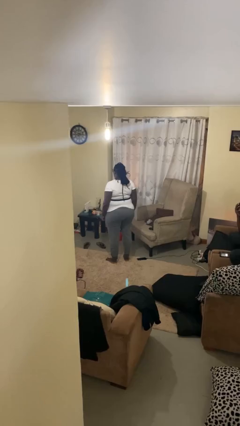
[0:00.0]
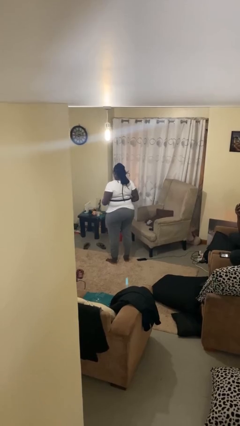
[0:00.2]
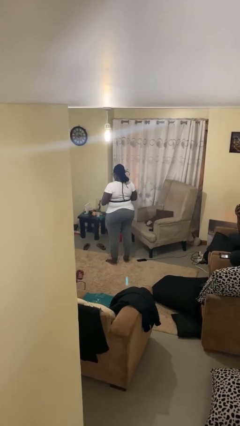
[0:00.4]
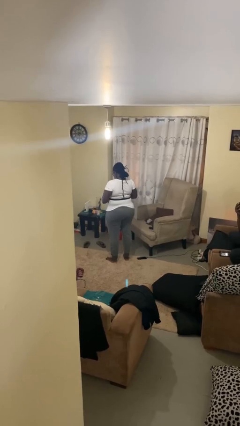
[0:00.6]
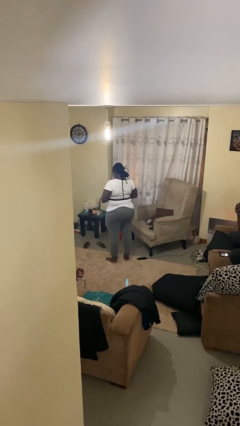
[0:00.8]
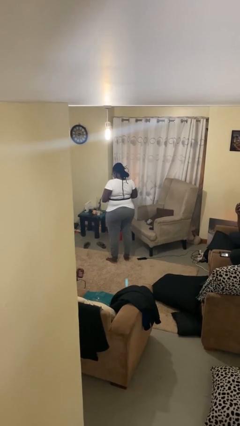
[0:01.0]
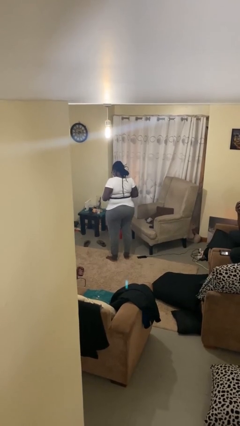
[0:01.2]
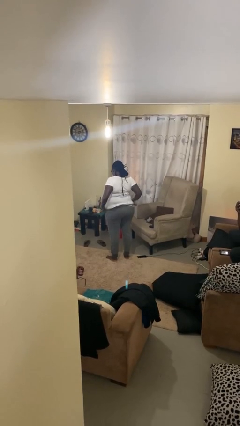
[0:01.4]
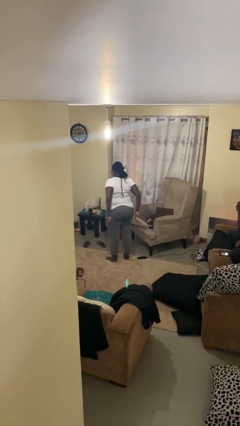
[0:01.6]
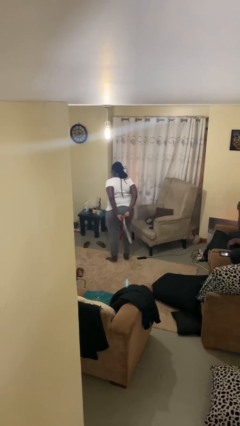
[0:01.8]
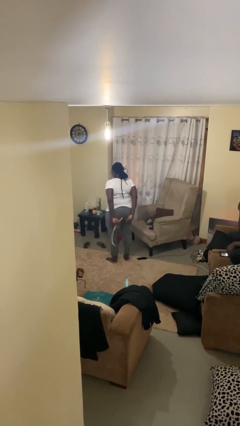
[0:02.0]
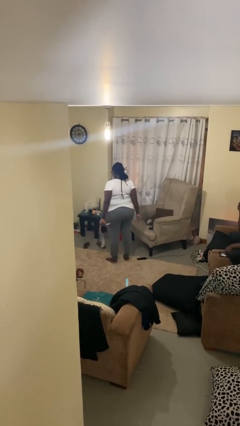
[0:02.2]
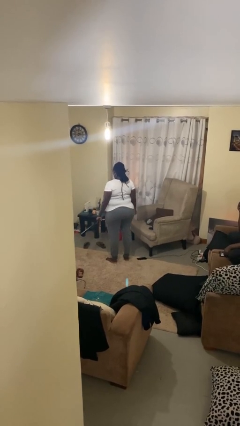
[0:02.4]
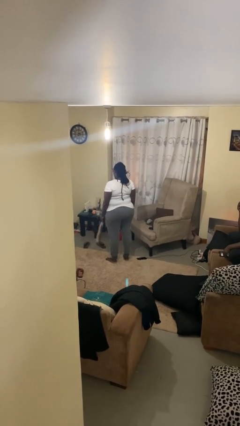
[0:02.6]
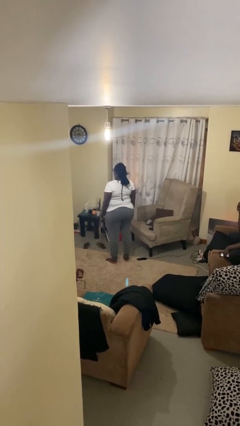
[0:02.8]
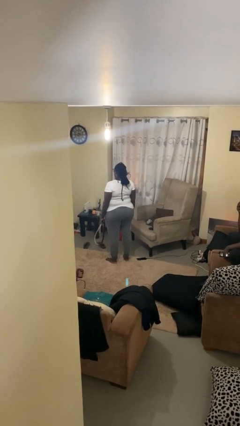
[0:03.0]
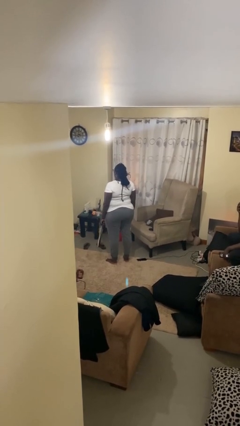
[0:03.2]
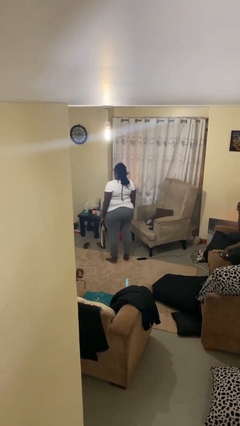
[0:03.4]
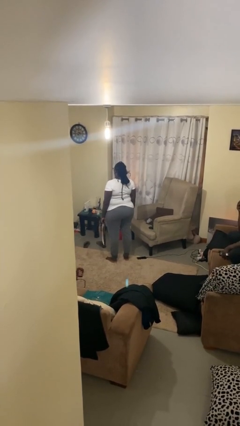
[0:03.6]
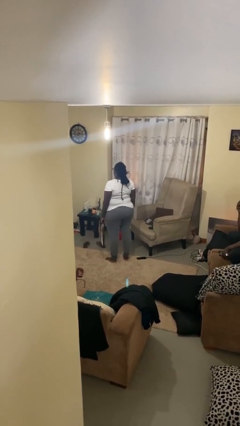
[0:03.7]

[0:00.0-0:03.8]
person takes off belt

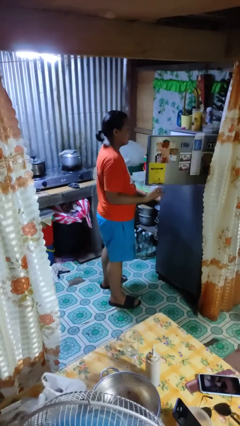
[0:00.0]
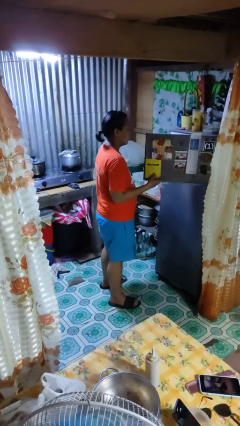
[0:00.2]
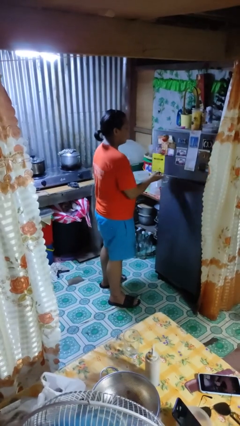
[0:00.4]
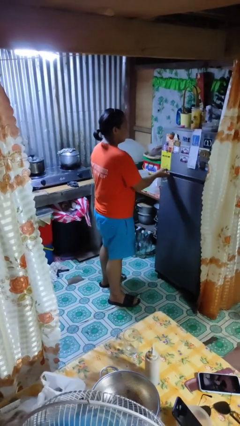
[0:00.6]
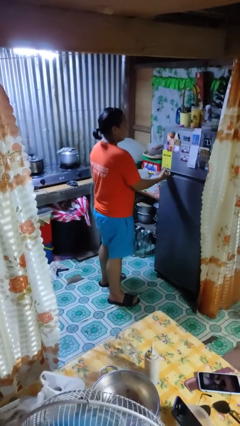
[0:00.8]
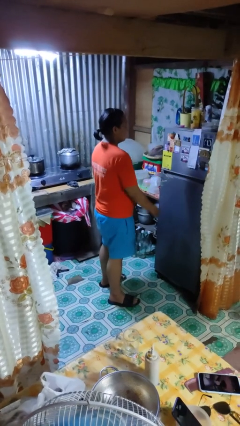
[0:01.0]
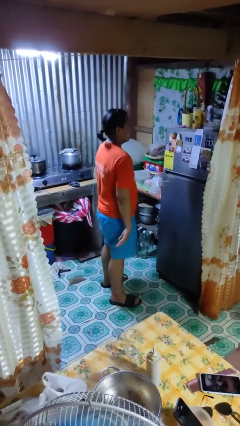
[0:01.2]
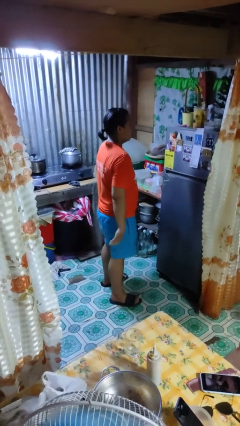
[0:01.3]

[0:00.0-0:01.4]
person closes refrigerator

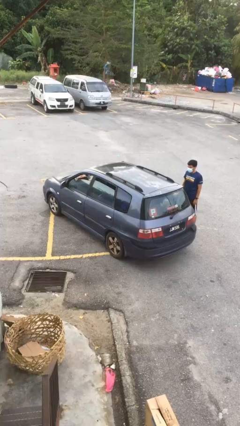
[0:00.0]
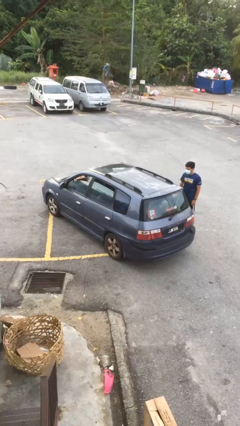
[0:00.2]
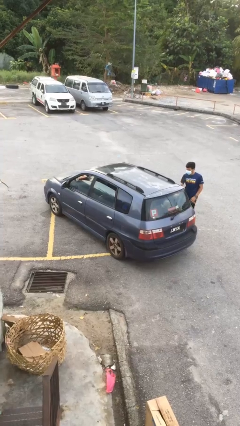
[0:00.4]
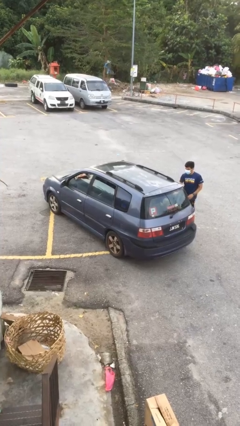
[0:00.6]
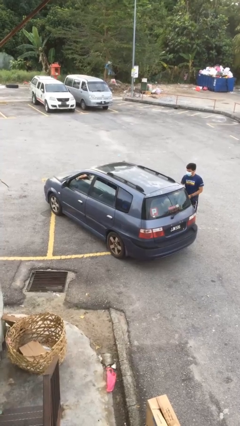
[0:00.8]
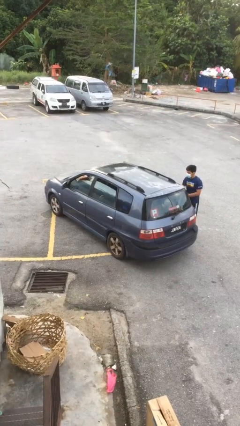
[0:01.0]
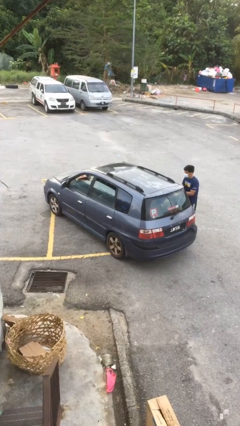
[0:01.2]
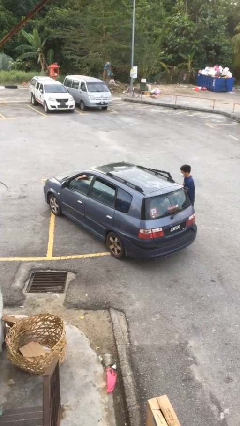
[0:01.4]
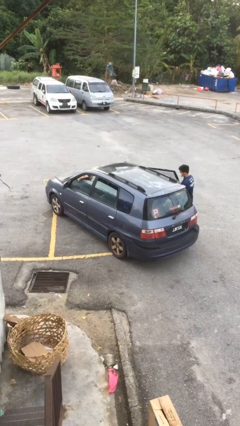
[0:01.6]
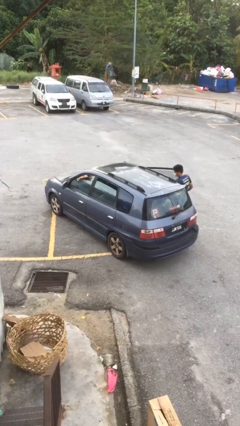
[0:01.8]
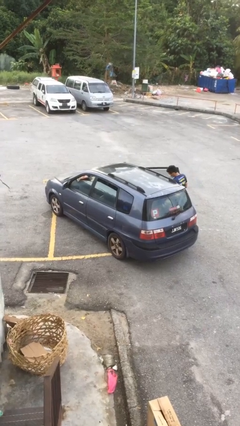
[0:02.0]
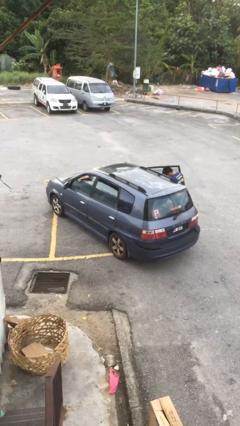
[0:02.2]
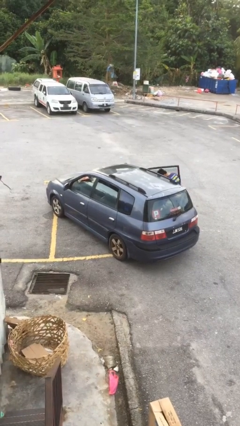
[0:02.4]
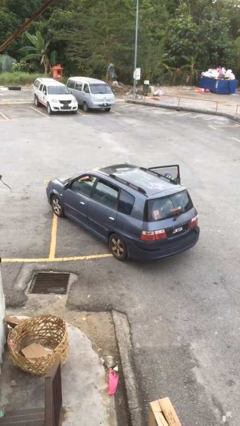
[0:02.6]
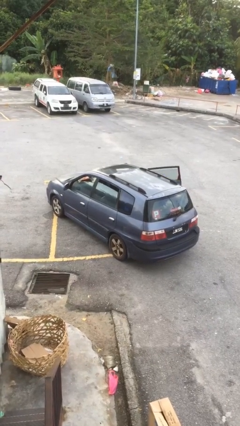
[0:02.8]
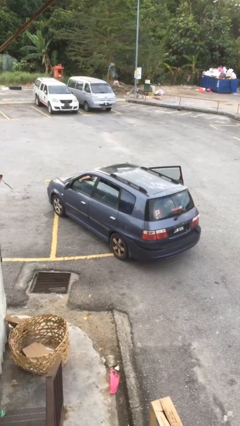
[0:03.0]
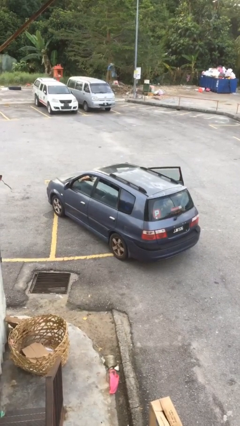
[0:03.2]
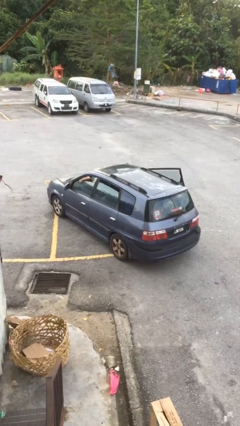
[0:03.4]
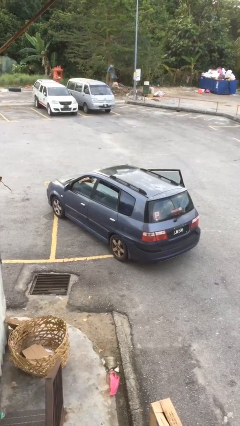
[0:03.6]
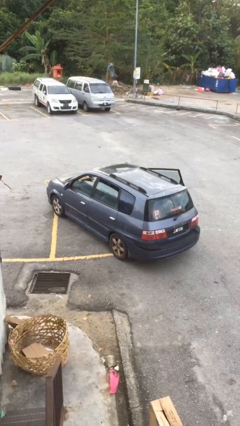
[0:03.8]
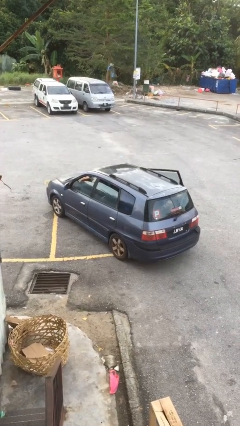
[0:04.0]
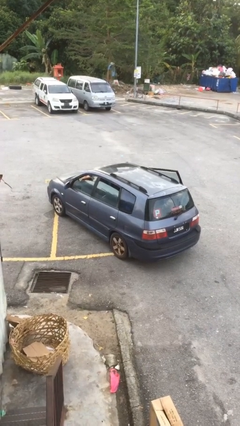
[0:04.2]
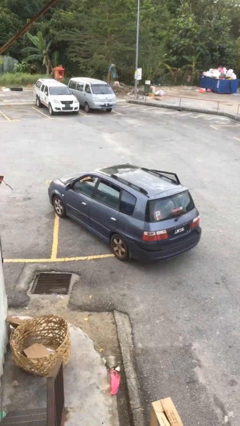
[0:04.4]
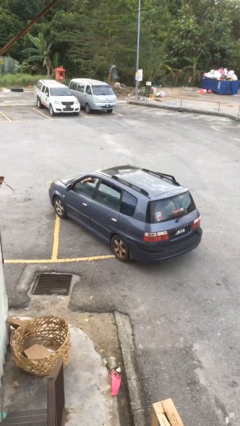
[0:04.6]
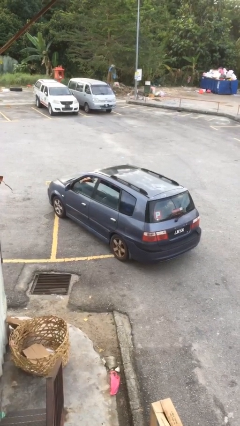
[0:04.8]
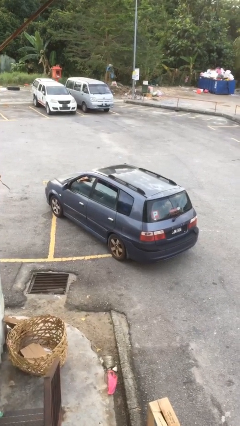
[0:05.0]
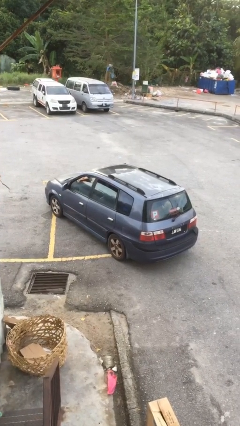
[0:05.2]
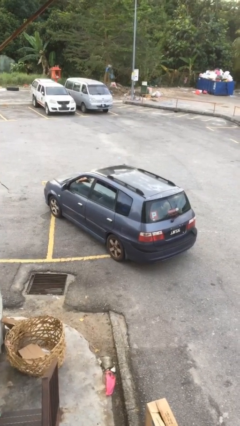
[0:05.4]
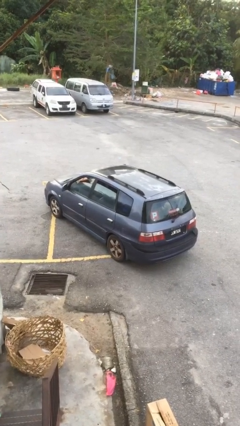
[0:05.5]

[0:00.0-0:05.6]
car picks up person

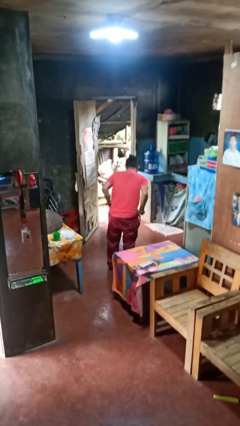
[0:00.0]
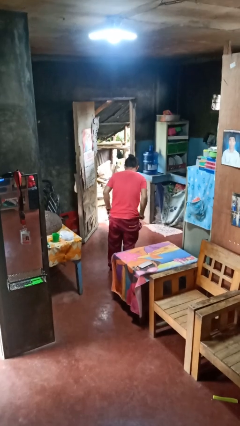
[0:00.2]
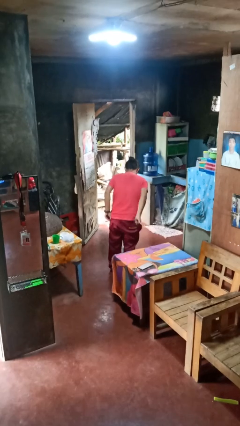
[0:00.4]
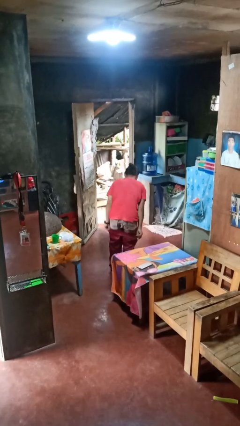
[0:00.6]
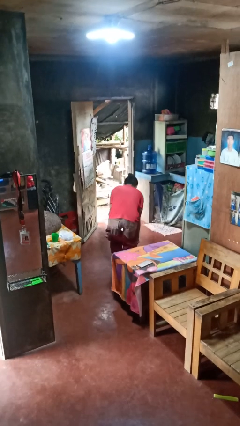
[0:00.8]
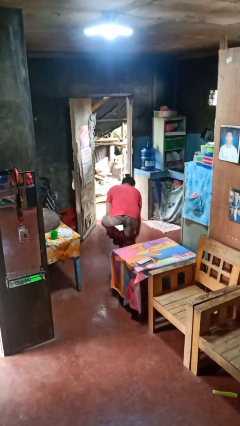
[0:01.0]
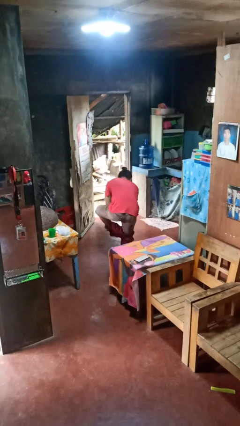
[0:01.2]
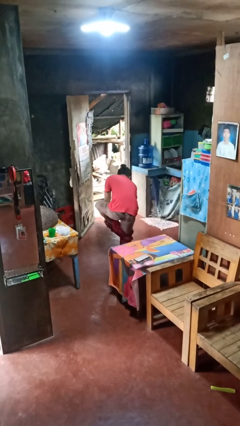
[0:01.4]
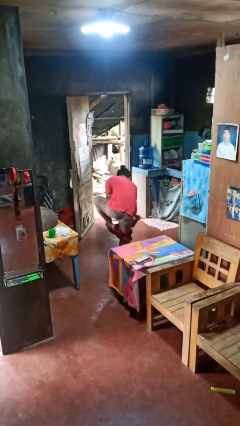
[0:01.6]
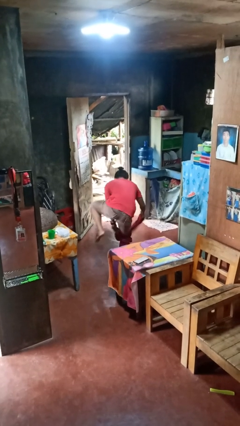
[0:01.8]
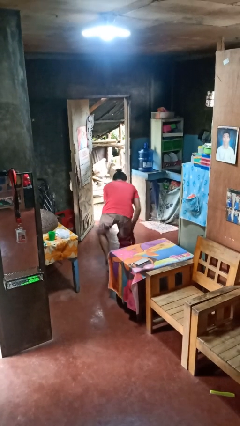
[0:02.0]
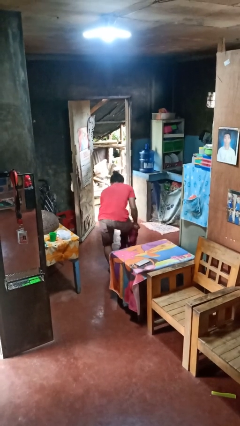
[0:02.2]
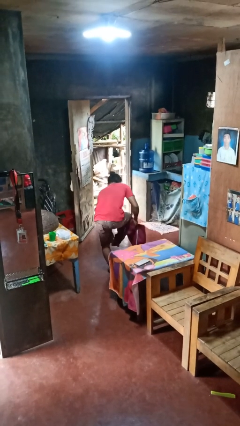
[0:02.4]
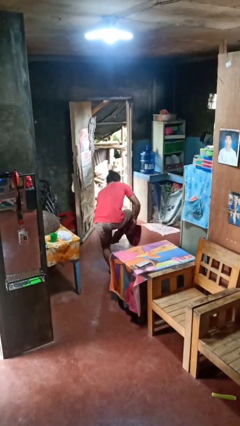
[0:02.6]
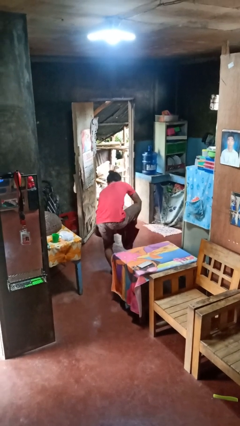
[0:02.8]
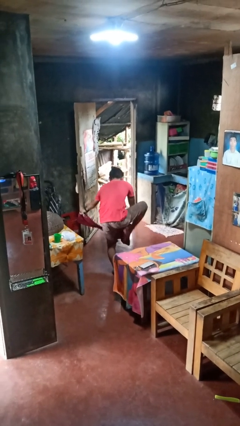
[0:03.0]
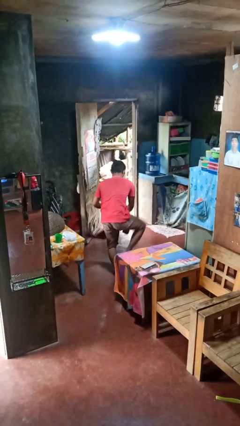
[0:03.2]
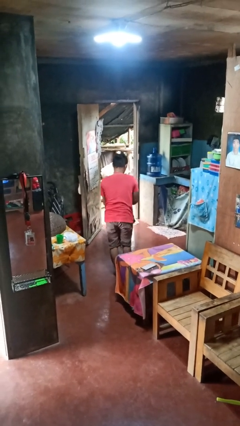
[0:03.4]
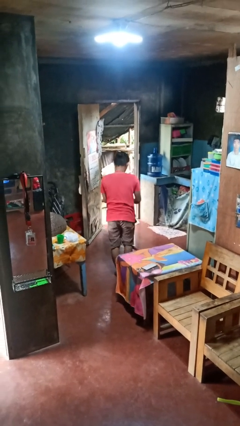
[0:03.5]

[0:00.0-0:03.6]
person takes off pants

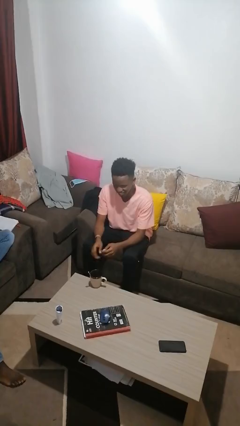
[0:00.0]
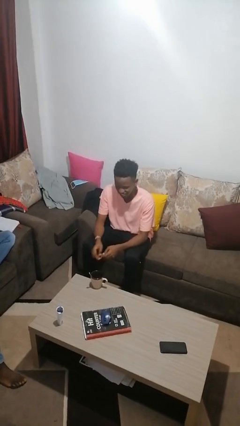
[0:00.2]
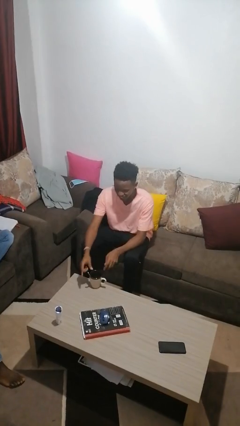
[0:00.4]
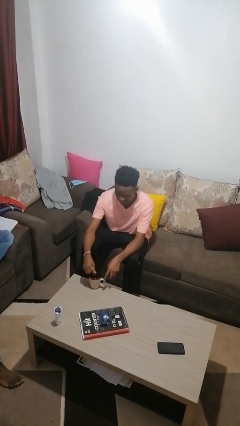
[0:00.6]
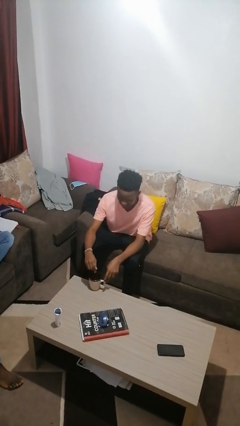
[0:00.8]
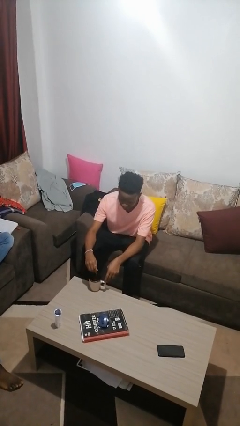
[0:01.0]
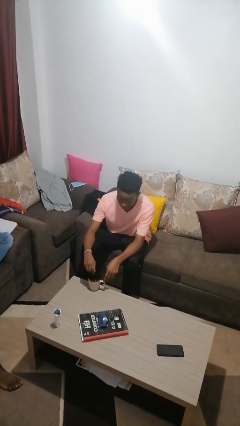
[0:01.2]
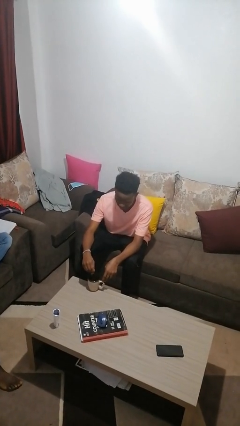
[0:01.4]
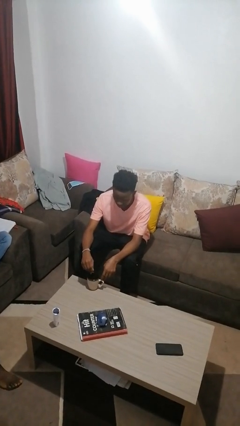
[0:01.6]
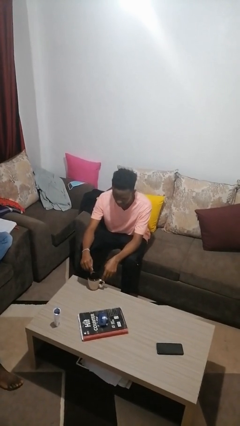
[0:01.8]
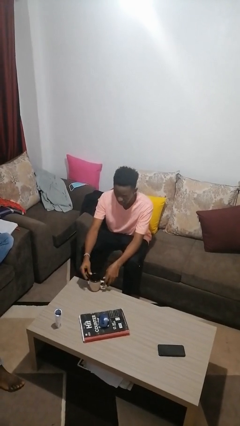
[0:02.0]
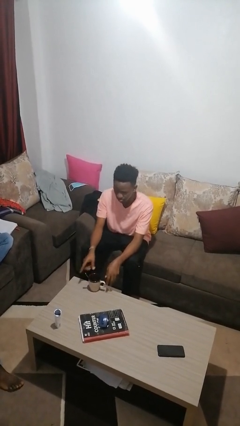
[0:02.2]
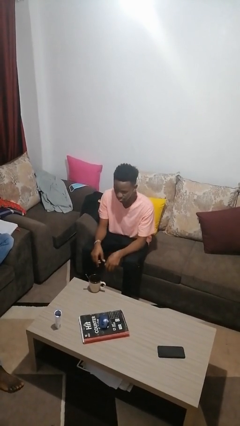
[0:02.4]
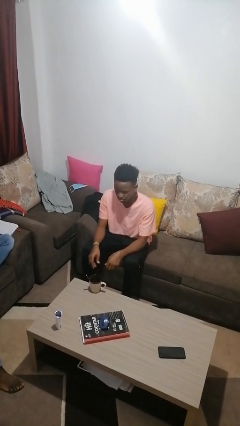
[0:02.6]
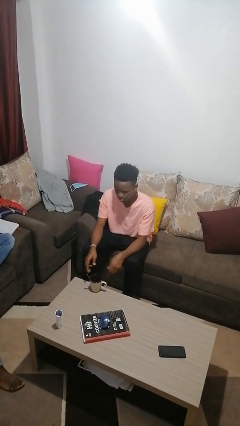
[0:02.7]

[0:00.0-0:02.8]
person stirs mug
